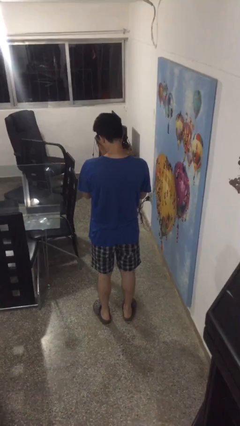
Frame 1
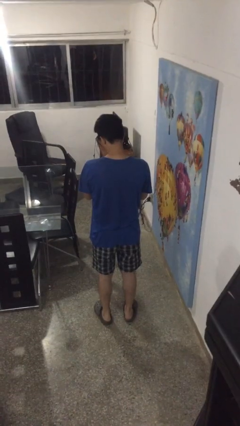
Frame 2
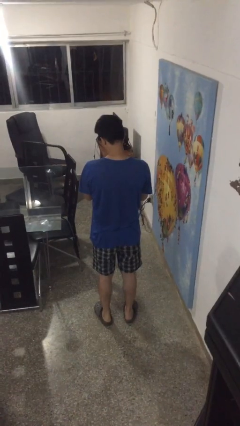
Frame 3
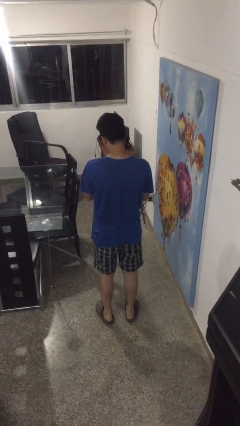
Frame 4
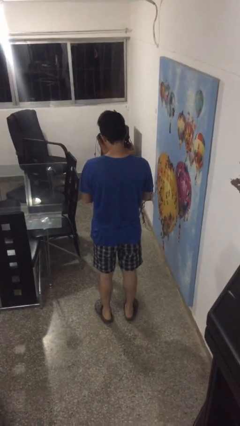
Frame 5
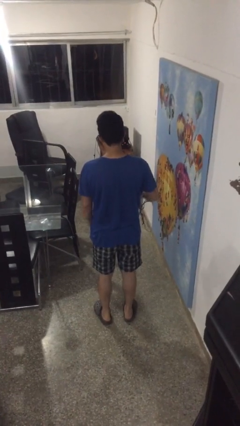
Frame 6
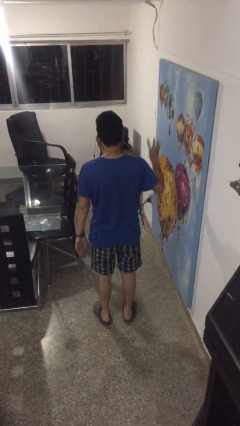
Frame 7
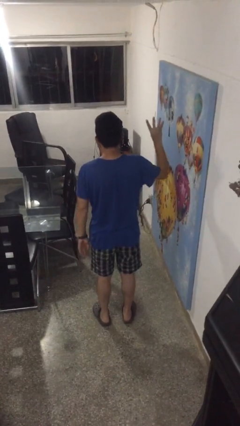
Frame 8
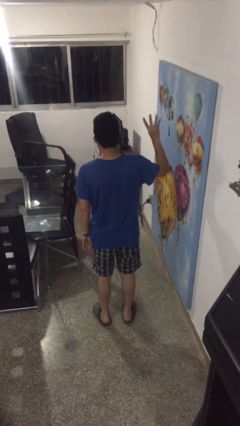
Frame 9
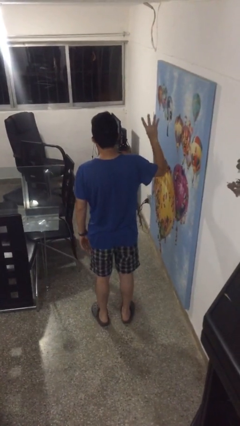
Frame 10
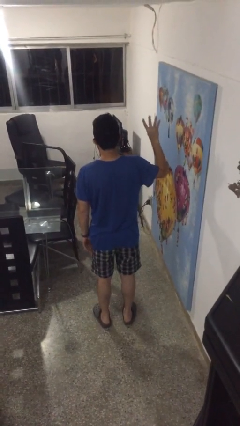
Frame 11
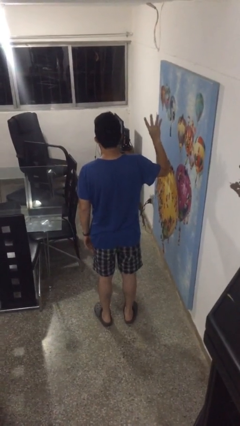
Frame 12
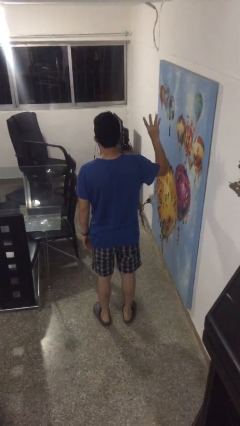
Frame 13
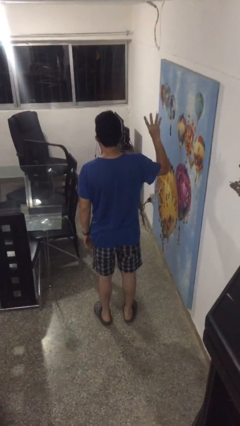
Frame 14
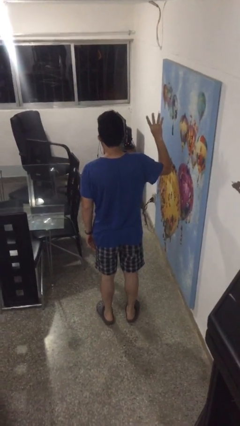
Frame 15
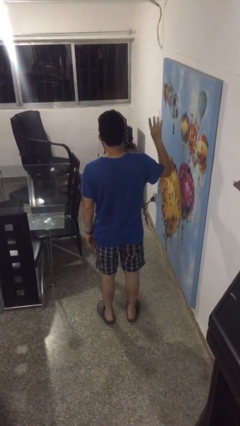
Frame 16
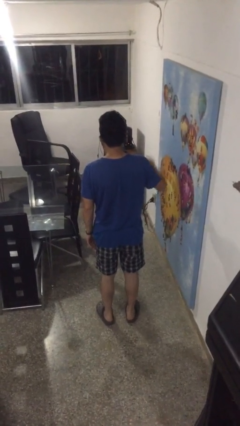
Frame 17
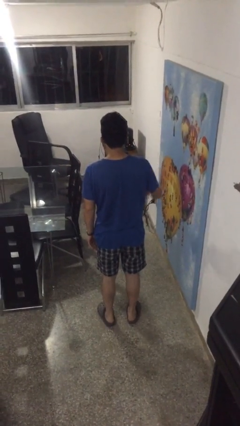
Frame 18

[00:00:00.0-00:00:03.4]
person gestures number four

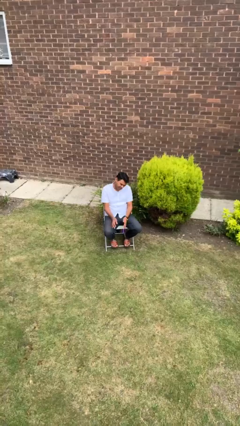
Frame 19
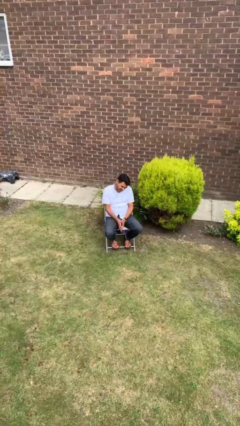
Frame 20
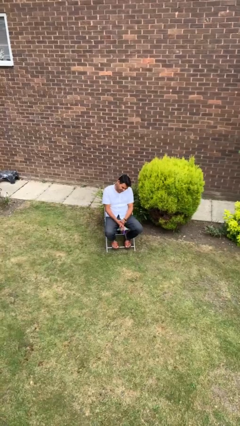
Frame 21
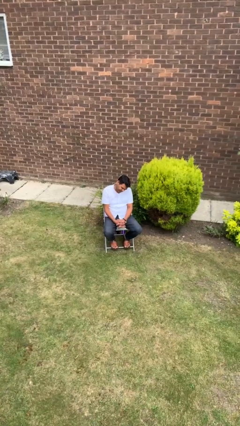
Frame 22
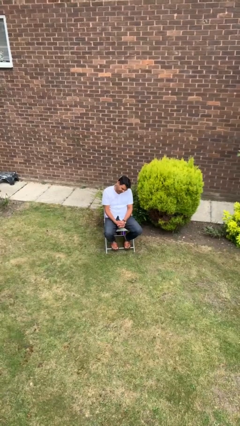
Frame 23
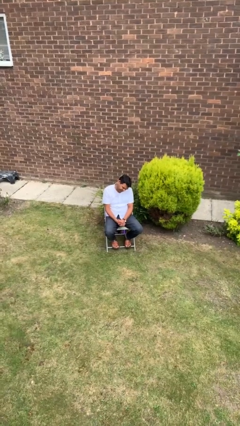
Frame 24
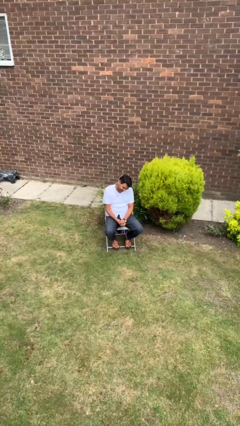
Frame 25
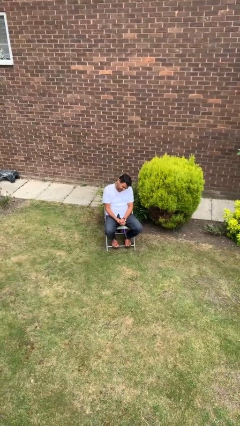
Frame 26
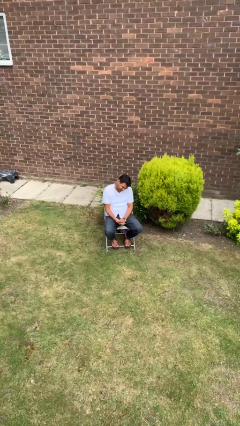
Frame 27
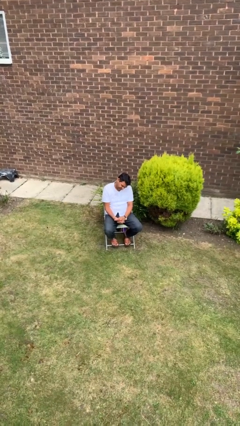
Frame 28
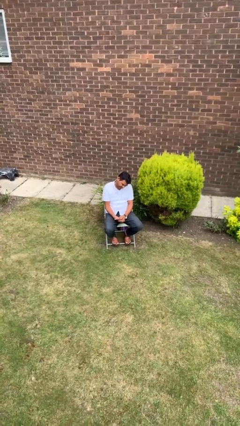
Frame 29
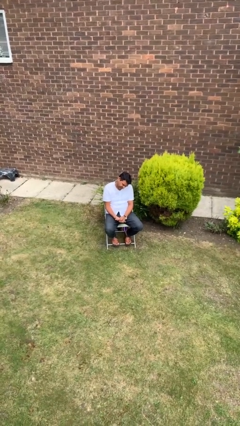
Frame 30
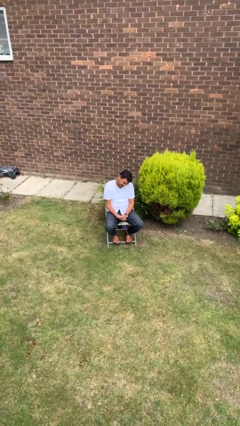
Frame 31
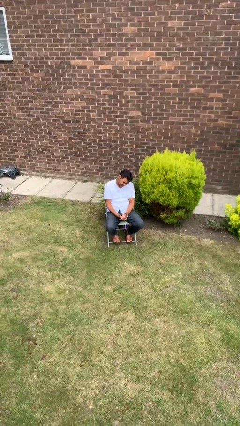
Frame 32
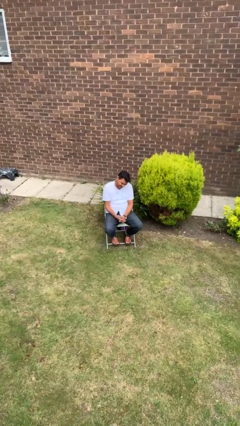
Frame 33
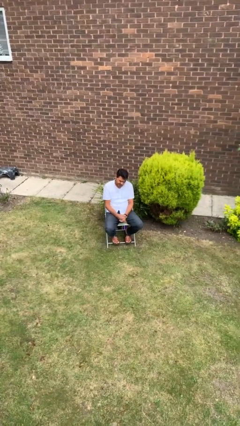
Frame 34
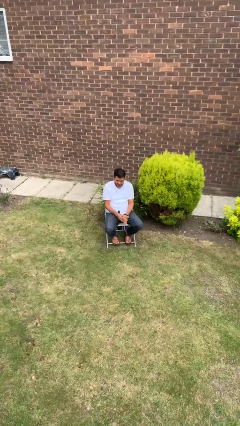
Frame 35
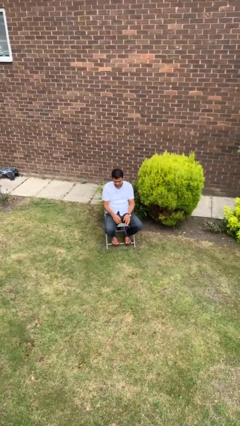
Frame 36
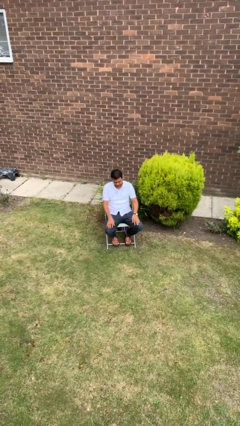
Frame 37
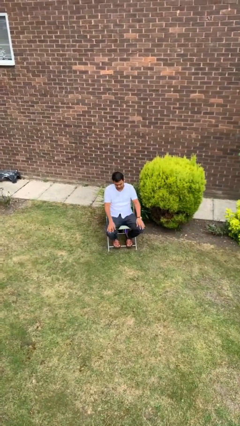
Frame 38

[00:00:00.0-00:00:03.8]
person looks at hands in lap

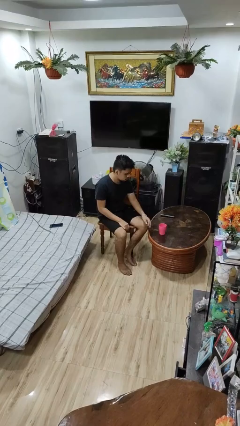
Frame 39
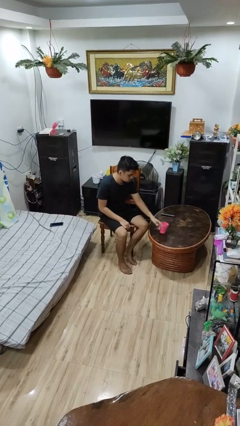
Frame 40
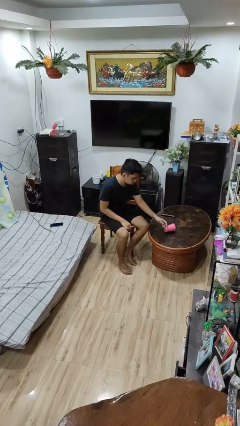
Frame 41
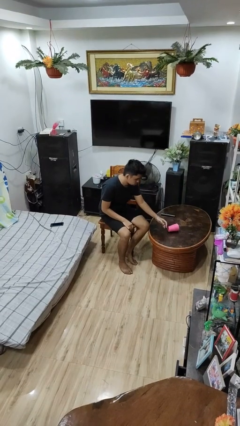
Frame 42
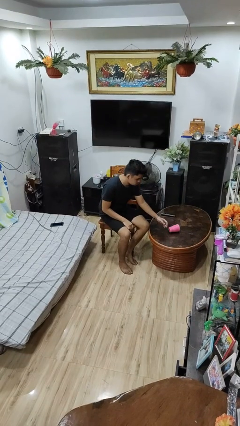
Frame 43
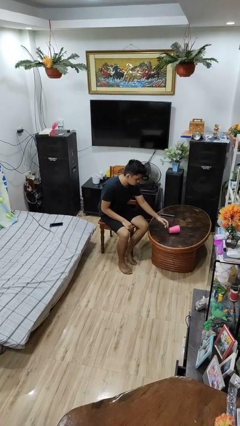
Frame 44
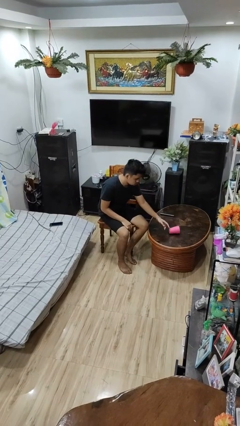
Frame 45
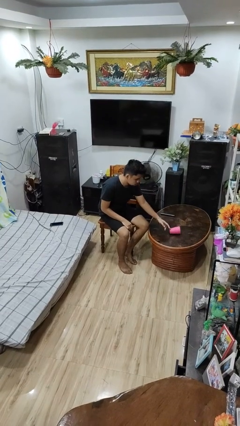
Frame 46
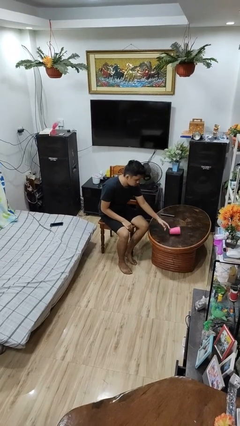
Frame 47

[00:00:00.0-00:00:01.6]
person knocks over glass

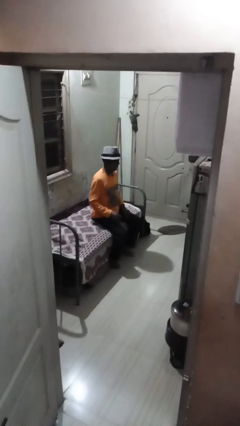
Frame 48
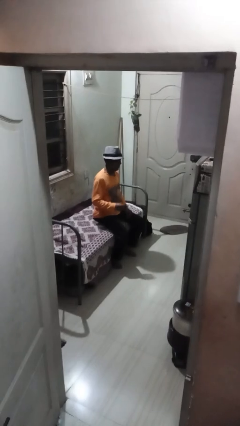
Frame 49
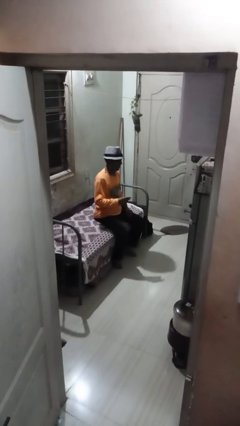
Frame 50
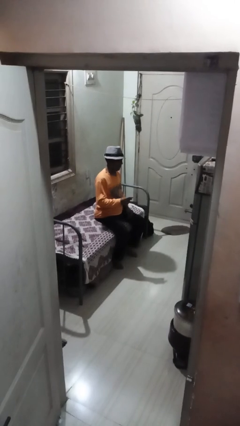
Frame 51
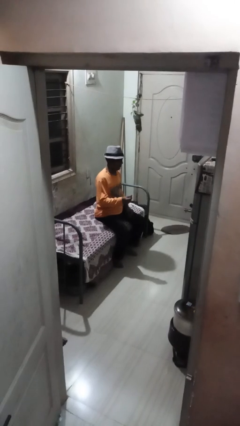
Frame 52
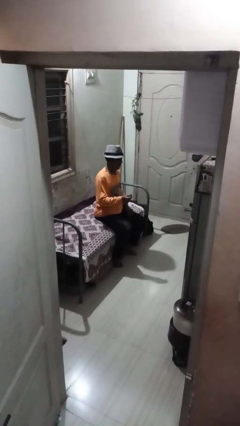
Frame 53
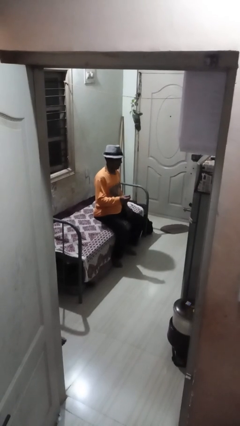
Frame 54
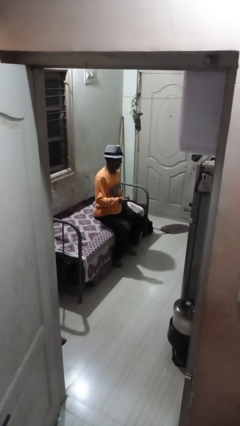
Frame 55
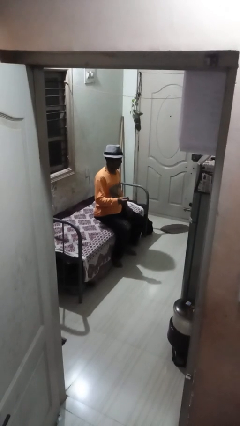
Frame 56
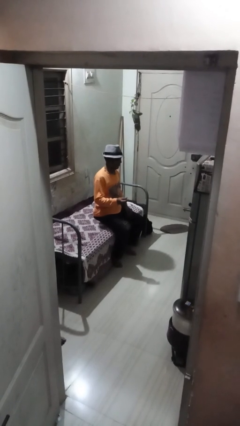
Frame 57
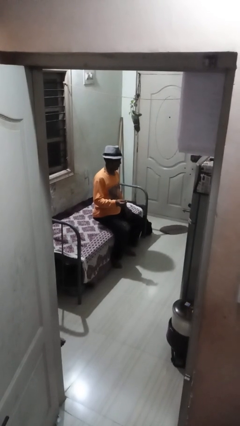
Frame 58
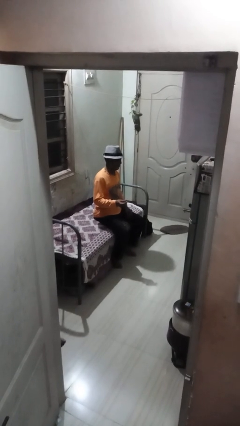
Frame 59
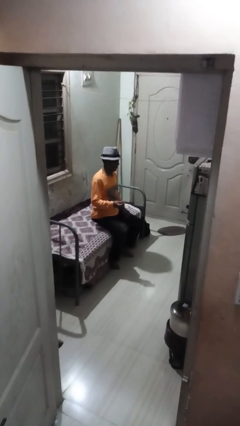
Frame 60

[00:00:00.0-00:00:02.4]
person snaps fingers

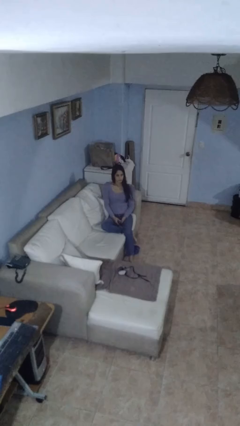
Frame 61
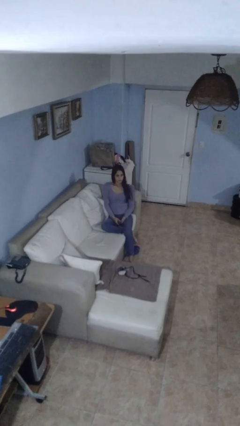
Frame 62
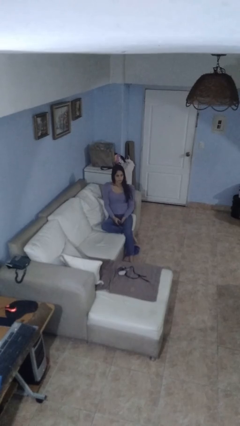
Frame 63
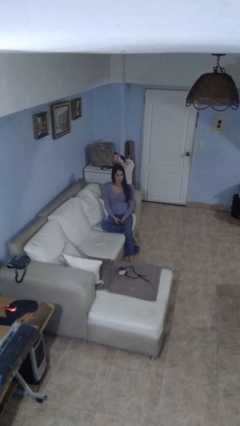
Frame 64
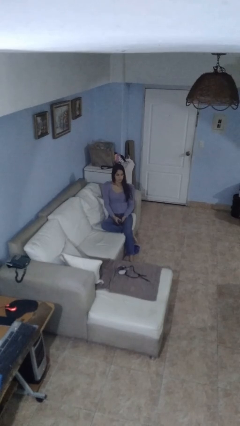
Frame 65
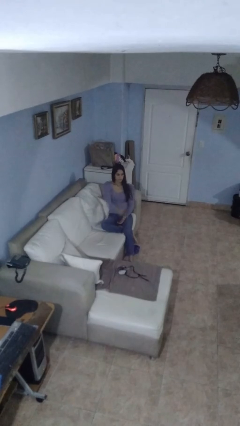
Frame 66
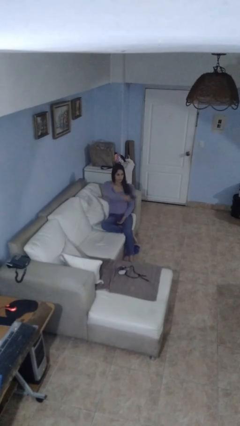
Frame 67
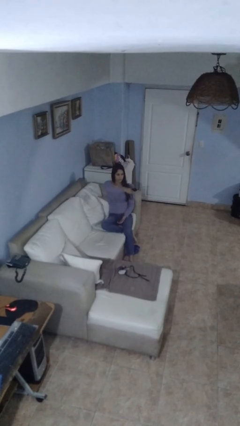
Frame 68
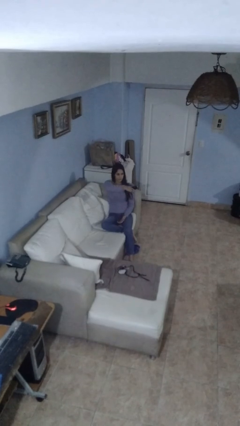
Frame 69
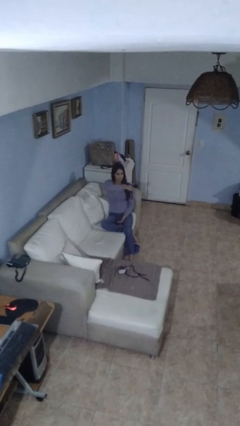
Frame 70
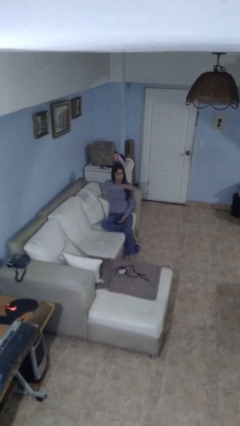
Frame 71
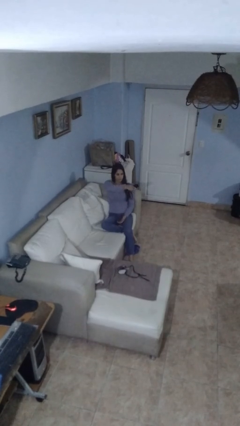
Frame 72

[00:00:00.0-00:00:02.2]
person uses television remote

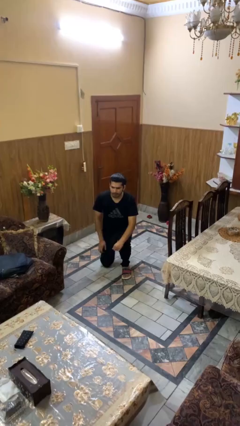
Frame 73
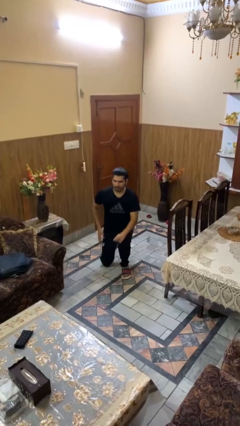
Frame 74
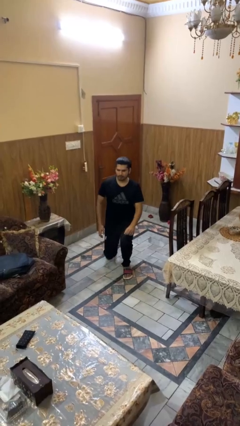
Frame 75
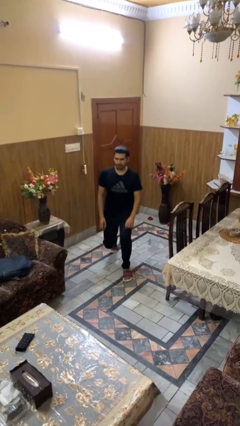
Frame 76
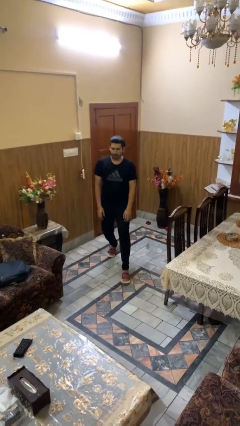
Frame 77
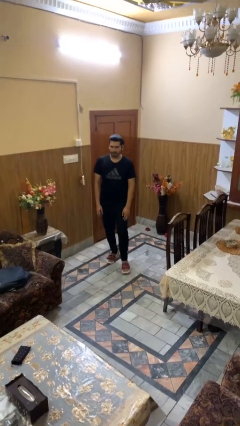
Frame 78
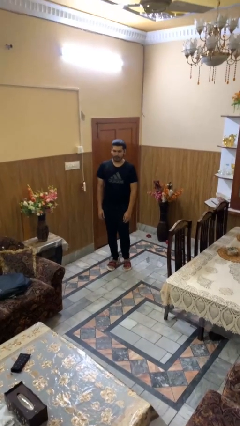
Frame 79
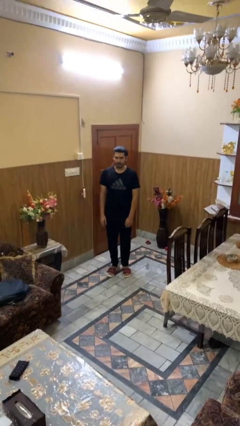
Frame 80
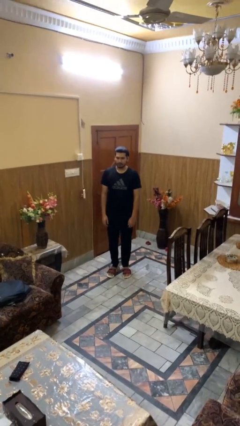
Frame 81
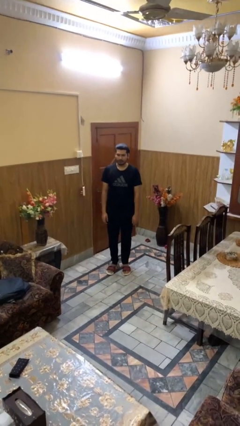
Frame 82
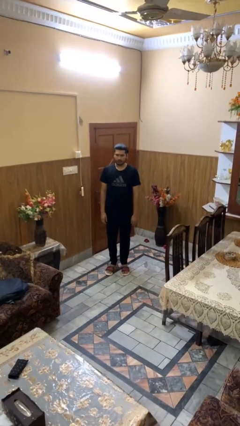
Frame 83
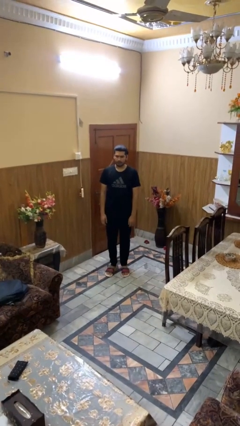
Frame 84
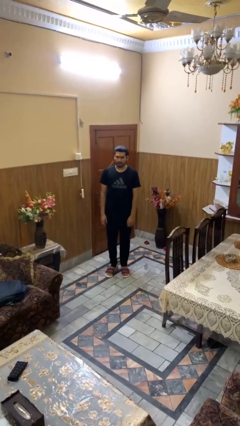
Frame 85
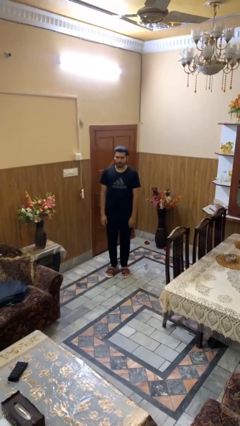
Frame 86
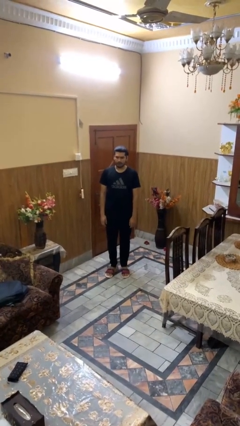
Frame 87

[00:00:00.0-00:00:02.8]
person stands up from floor

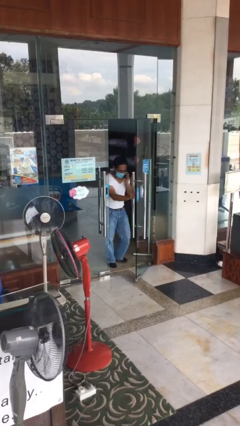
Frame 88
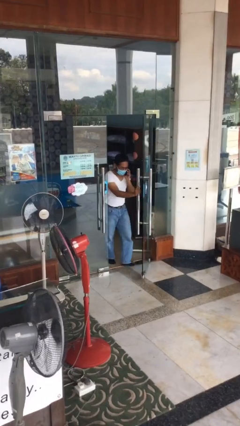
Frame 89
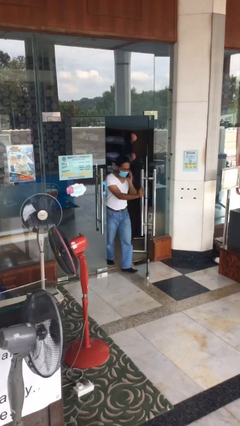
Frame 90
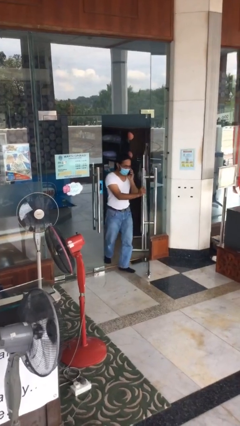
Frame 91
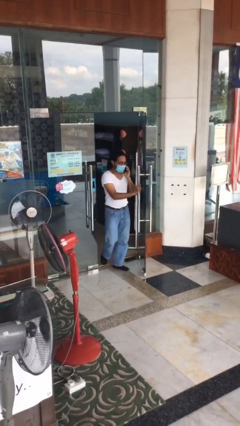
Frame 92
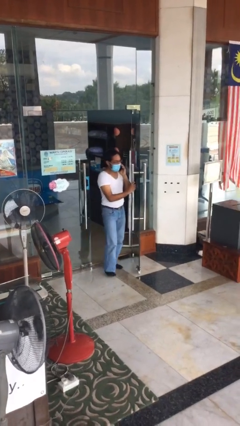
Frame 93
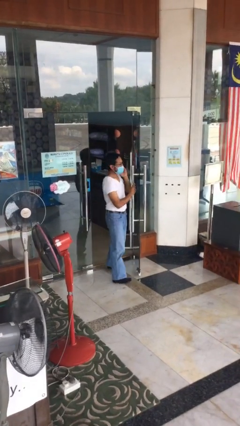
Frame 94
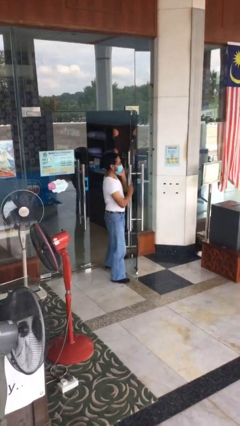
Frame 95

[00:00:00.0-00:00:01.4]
person enters scene through structure
